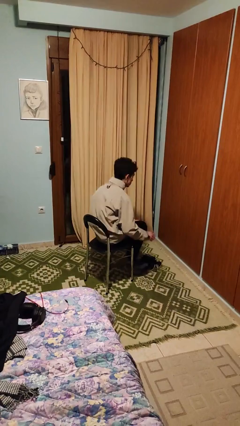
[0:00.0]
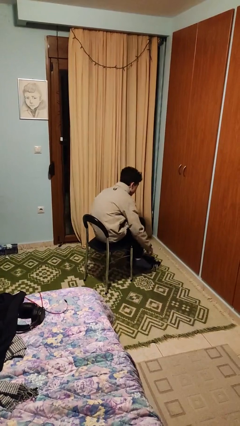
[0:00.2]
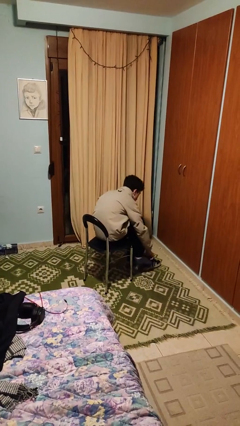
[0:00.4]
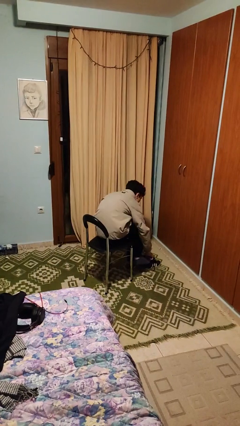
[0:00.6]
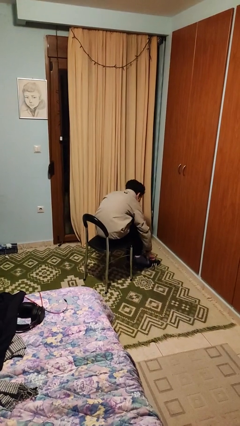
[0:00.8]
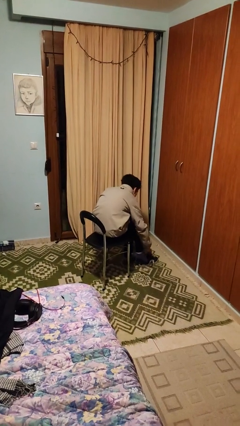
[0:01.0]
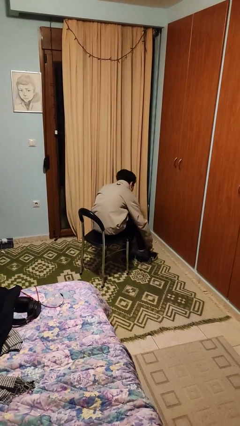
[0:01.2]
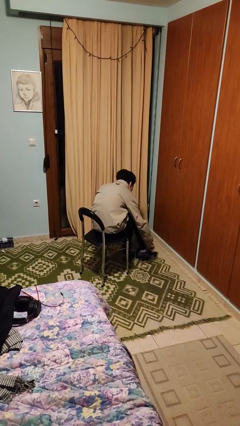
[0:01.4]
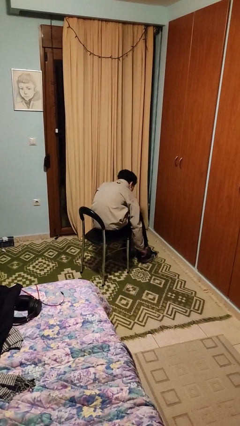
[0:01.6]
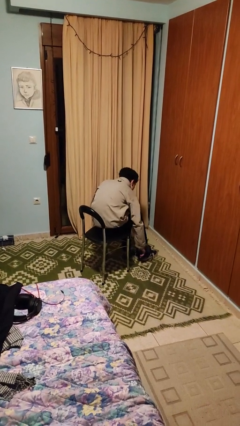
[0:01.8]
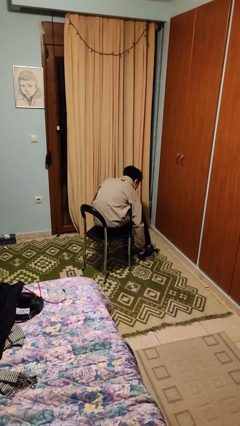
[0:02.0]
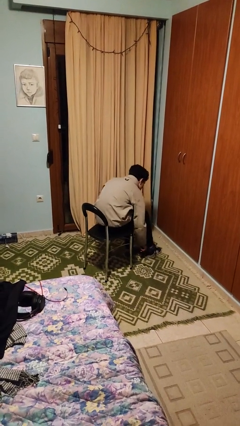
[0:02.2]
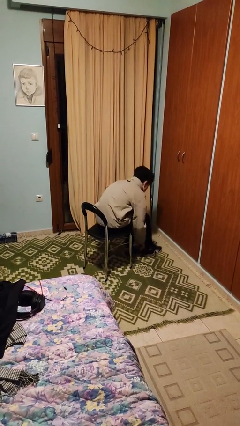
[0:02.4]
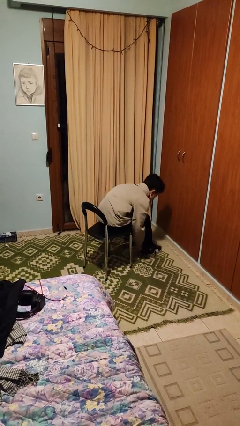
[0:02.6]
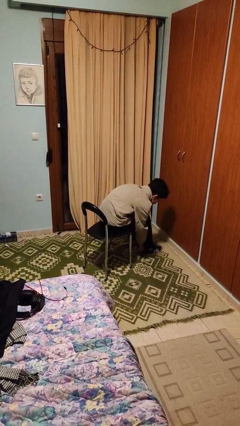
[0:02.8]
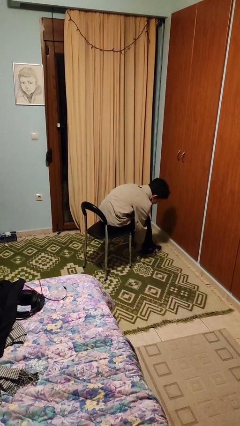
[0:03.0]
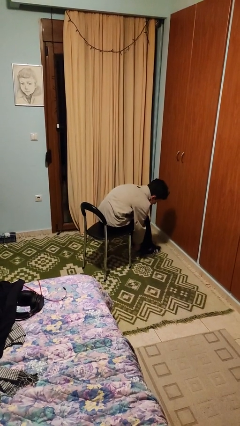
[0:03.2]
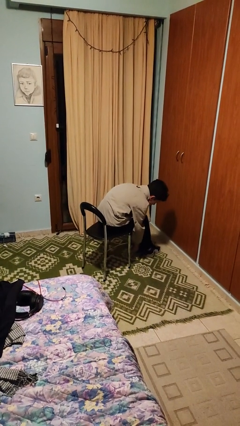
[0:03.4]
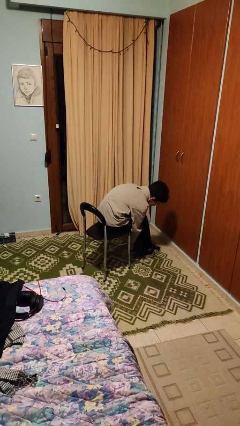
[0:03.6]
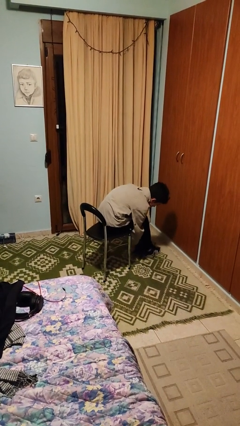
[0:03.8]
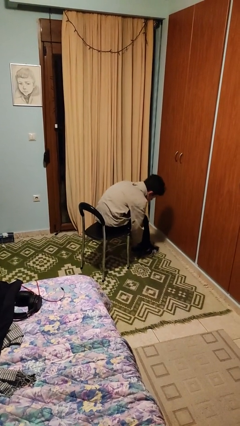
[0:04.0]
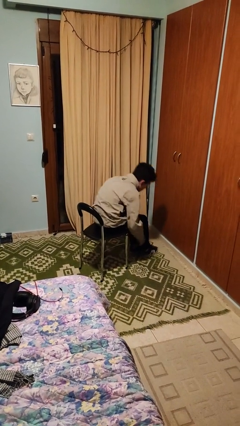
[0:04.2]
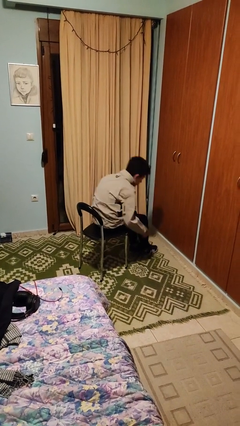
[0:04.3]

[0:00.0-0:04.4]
person puts on shoes

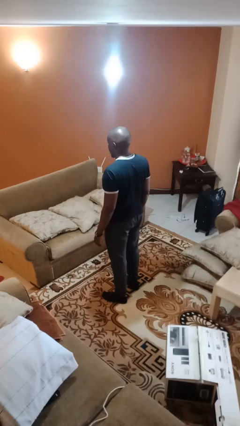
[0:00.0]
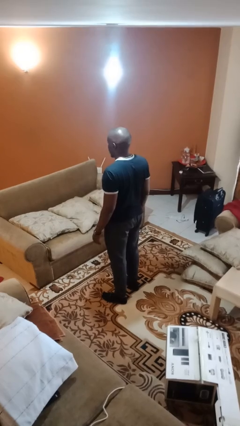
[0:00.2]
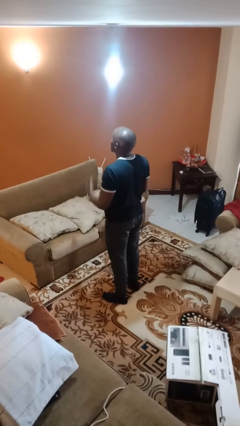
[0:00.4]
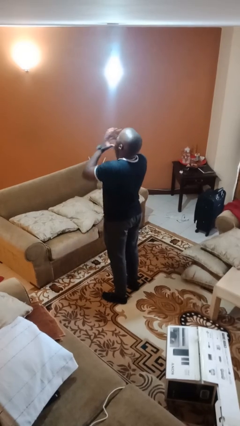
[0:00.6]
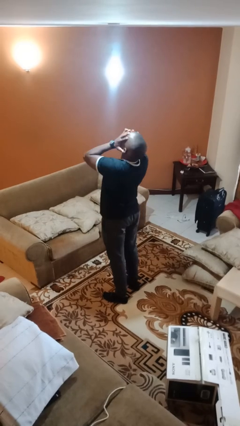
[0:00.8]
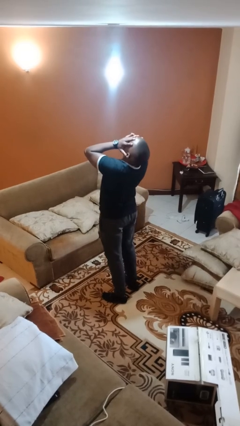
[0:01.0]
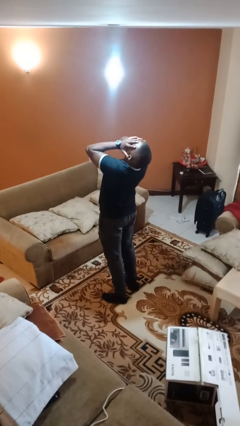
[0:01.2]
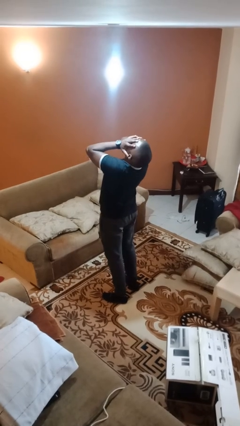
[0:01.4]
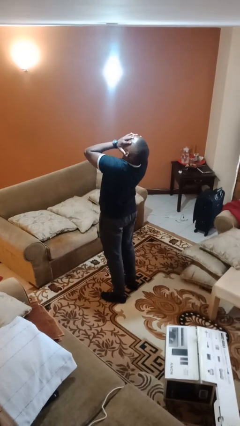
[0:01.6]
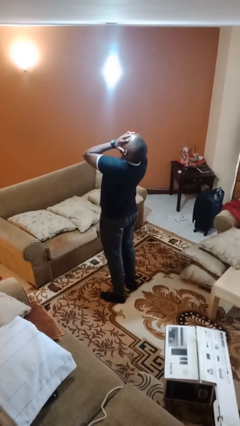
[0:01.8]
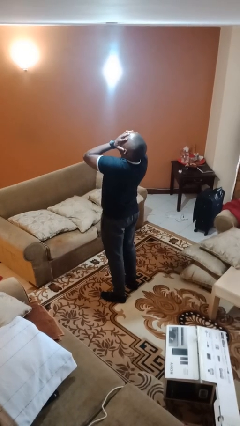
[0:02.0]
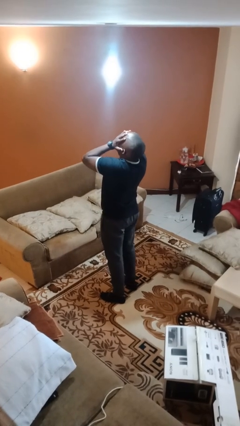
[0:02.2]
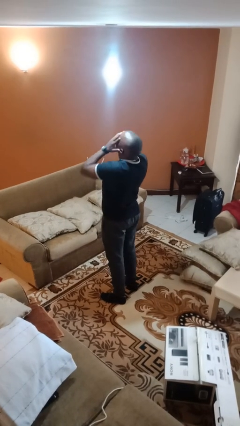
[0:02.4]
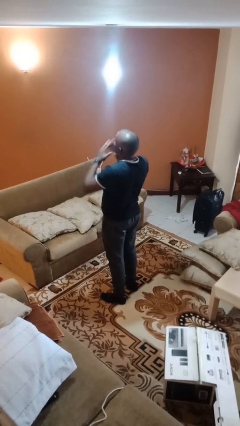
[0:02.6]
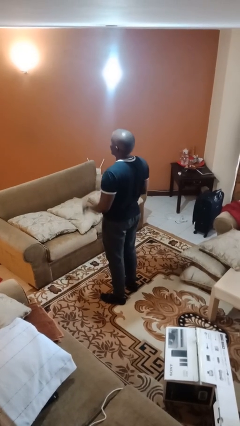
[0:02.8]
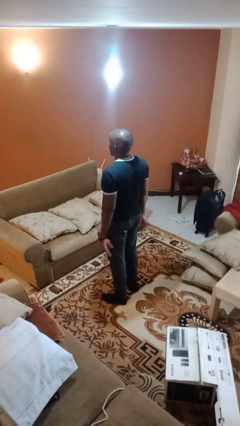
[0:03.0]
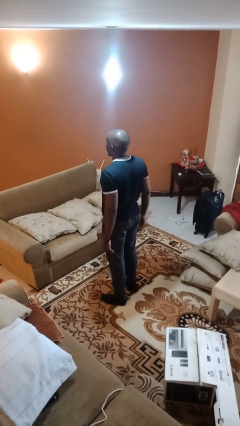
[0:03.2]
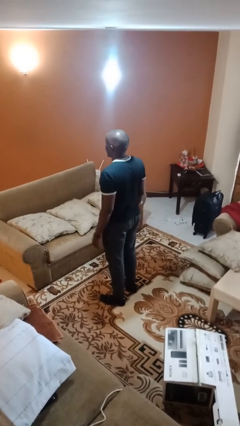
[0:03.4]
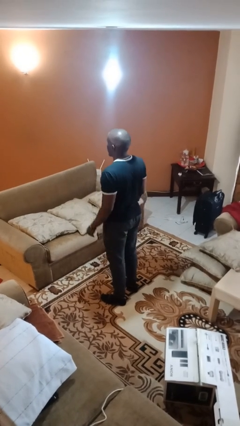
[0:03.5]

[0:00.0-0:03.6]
person covers face with hands

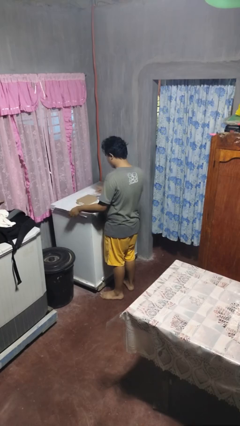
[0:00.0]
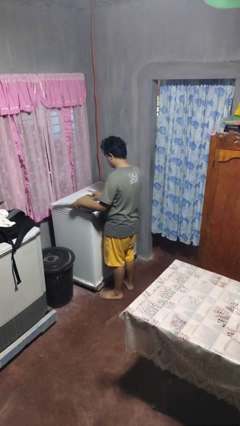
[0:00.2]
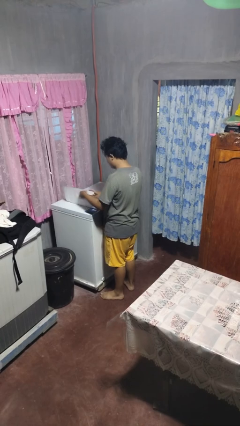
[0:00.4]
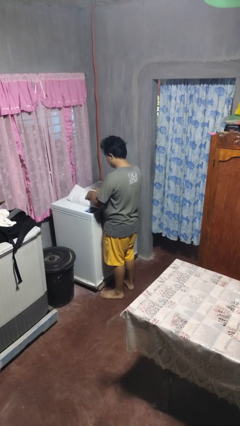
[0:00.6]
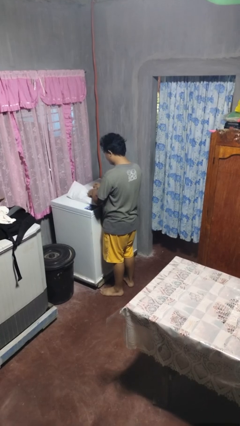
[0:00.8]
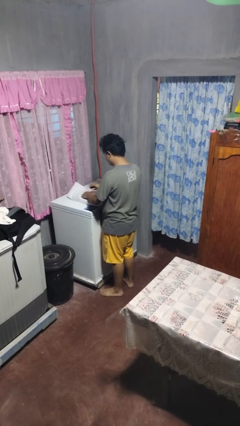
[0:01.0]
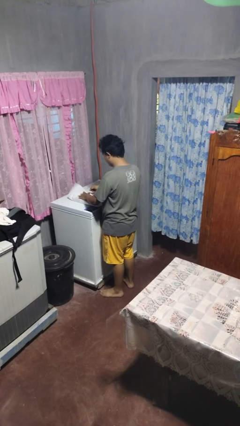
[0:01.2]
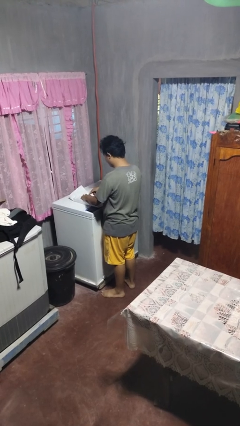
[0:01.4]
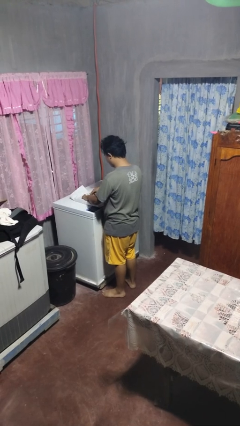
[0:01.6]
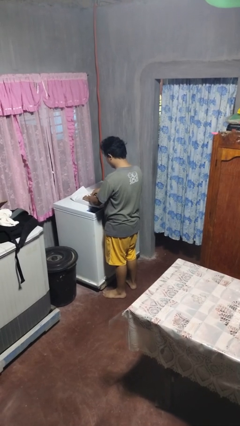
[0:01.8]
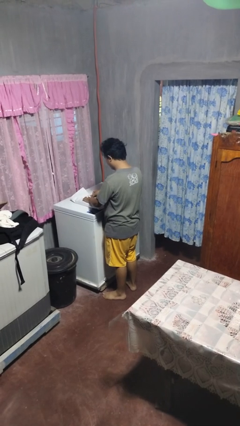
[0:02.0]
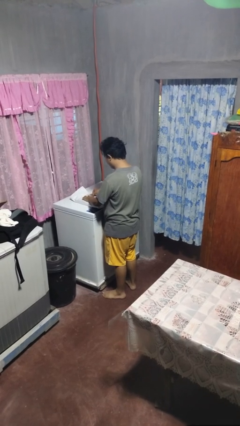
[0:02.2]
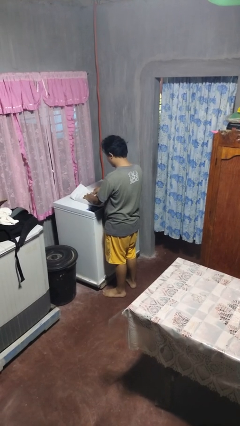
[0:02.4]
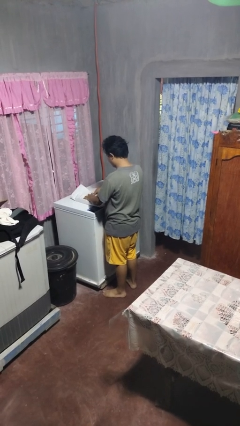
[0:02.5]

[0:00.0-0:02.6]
person wraps box

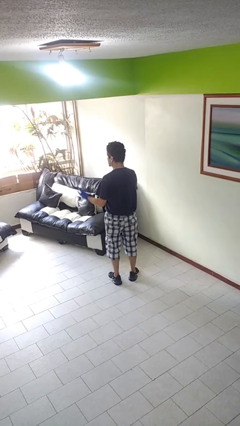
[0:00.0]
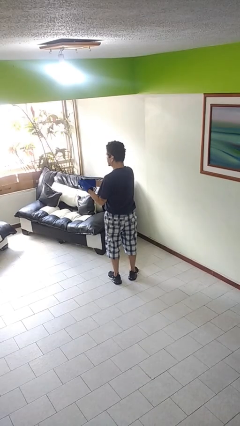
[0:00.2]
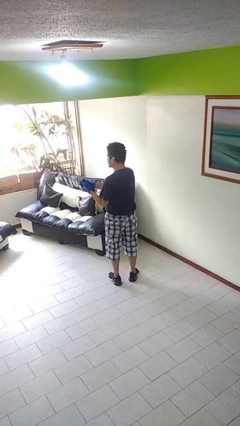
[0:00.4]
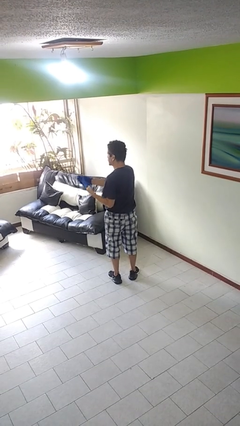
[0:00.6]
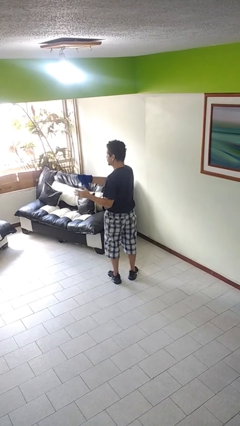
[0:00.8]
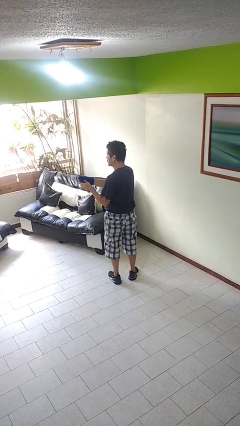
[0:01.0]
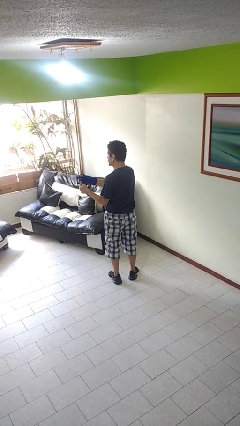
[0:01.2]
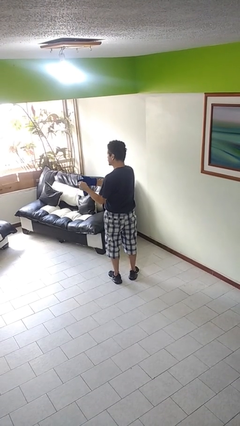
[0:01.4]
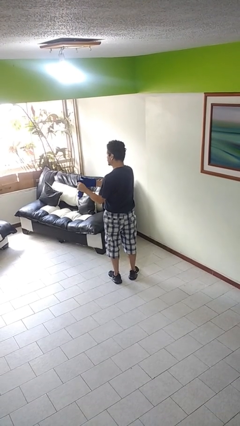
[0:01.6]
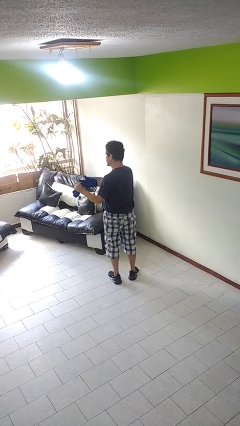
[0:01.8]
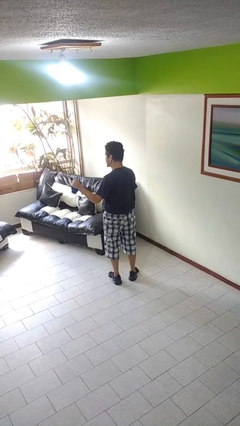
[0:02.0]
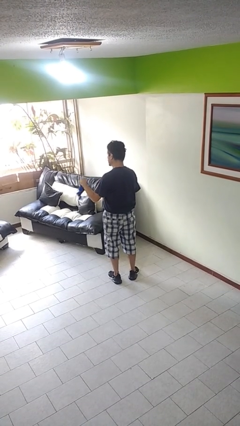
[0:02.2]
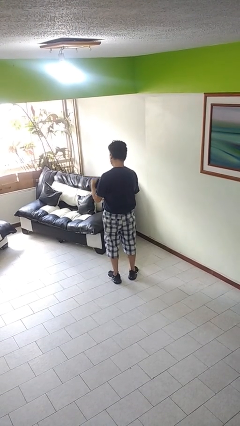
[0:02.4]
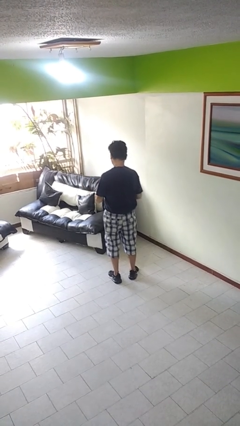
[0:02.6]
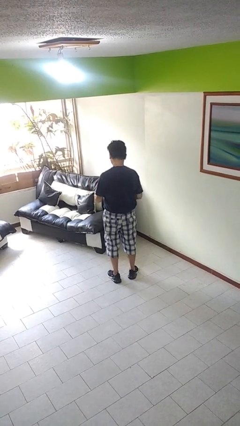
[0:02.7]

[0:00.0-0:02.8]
person takes off gloves

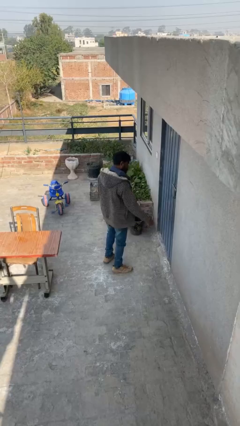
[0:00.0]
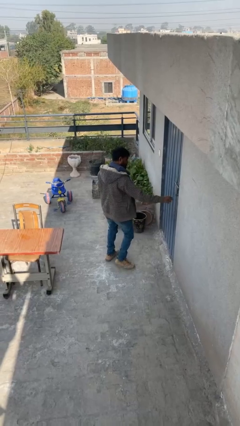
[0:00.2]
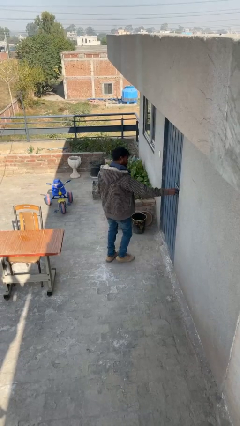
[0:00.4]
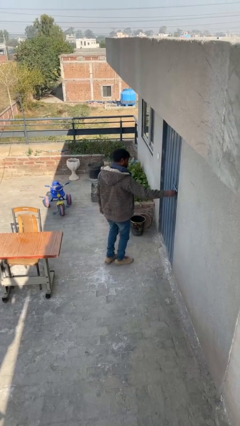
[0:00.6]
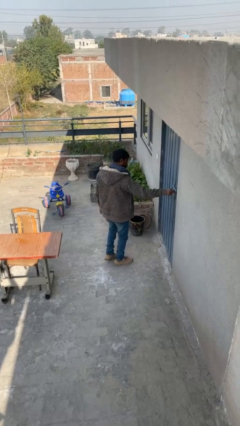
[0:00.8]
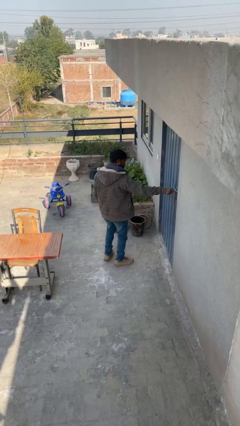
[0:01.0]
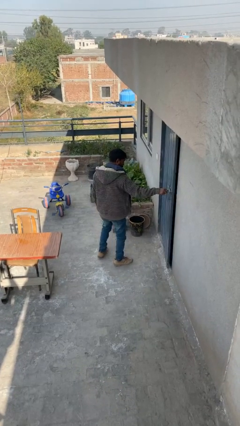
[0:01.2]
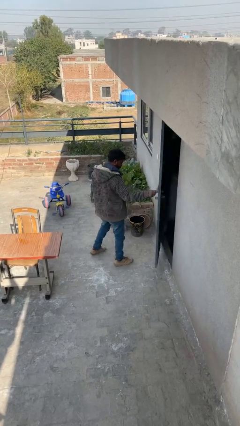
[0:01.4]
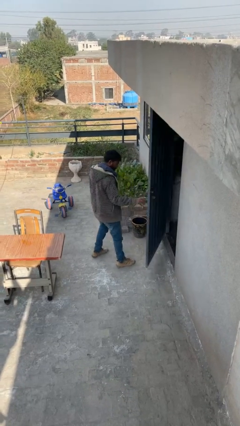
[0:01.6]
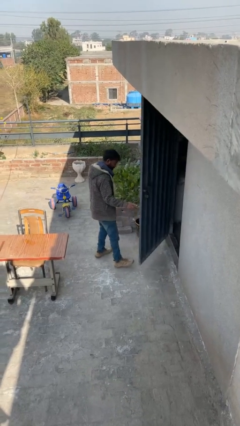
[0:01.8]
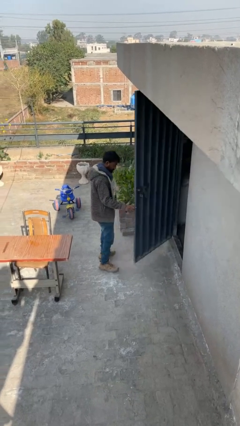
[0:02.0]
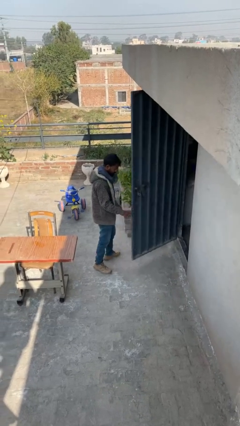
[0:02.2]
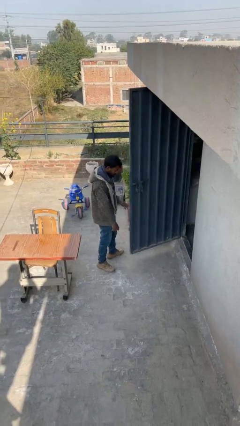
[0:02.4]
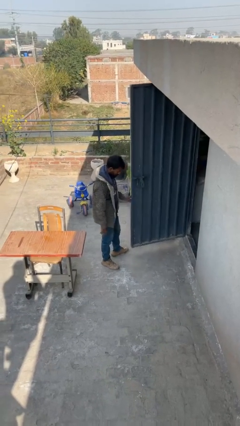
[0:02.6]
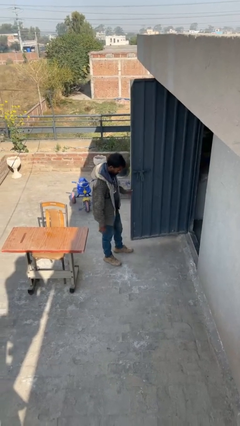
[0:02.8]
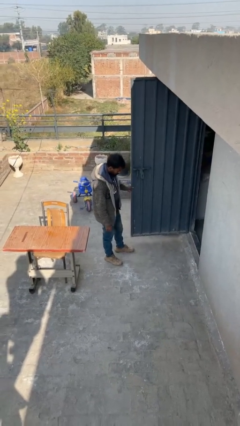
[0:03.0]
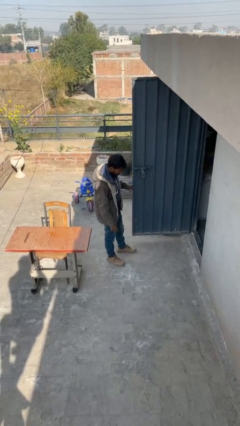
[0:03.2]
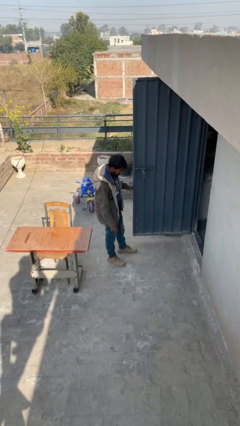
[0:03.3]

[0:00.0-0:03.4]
person opens facility door

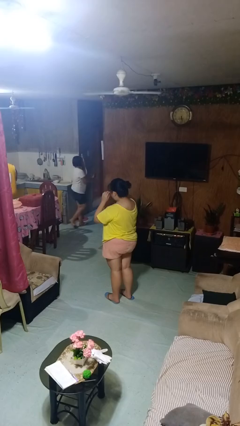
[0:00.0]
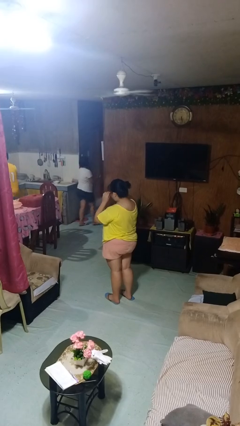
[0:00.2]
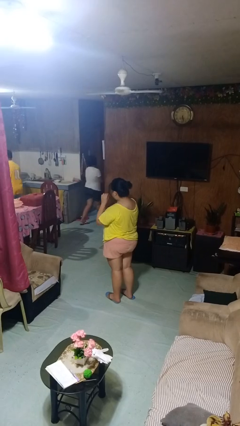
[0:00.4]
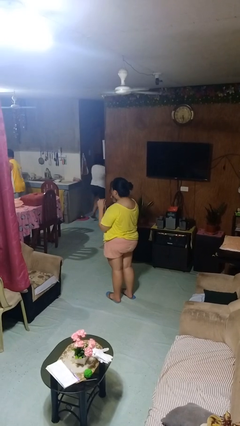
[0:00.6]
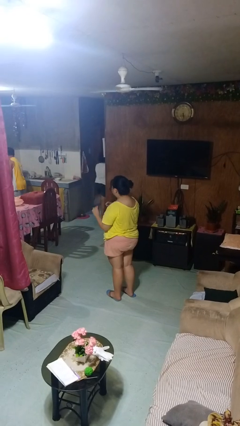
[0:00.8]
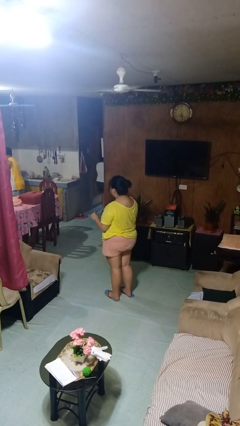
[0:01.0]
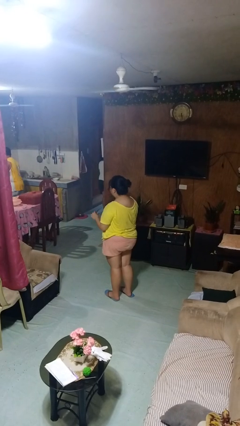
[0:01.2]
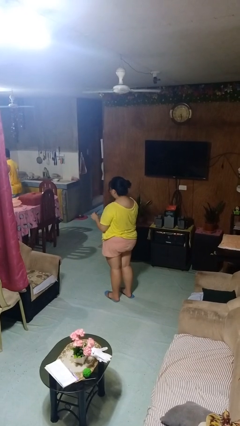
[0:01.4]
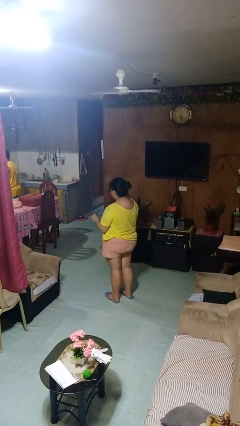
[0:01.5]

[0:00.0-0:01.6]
person takes off glasses
